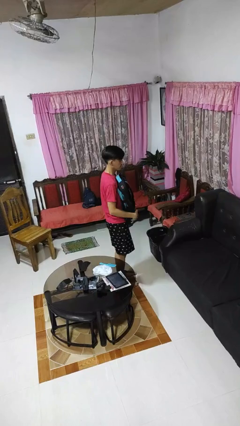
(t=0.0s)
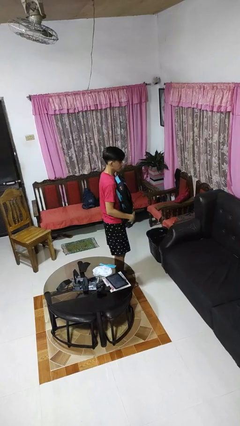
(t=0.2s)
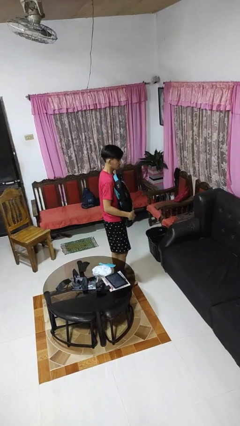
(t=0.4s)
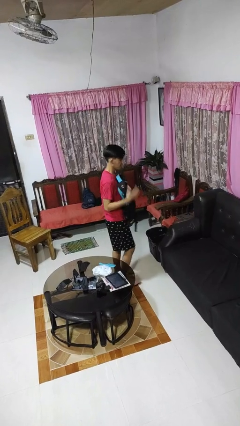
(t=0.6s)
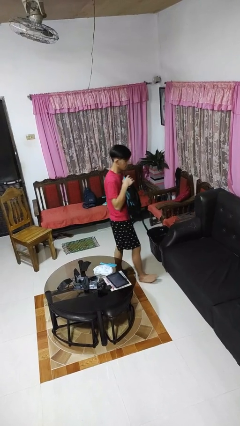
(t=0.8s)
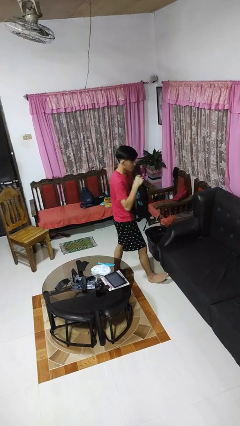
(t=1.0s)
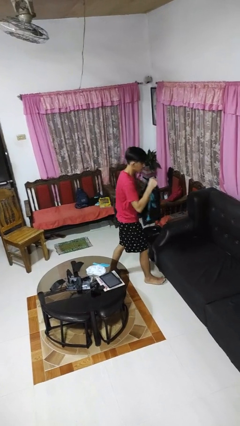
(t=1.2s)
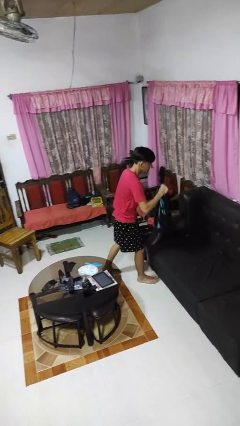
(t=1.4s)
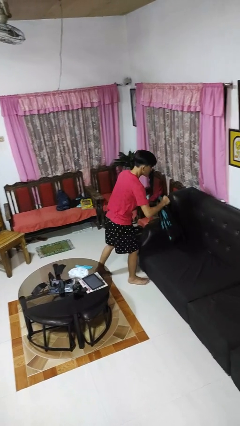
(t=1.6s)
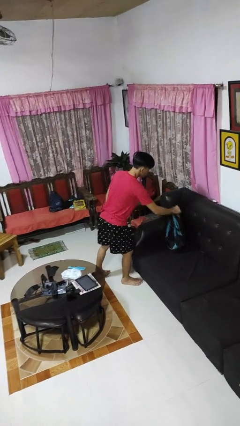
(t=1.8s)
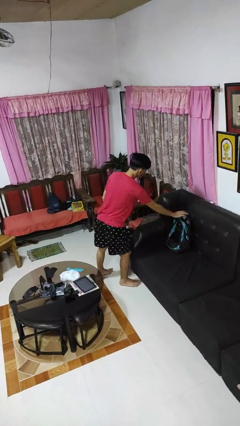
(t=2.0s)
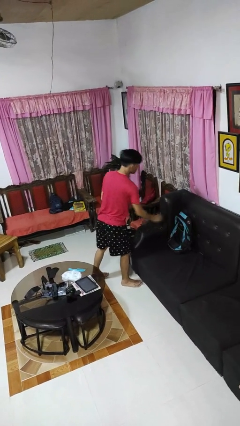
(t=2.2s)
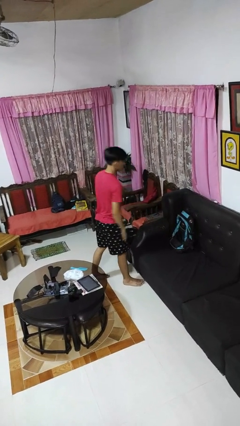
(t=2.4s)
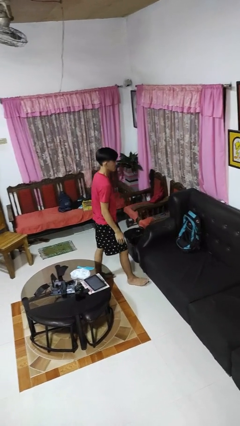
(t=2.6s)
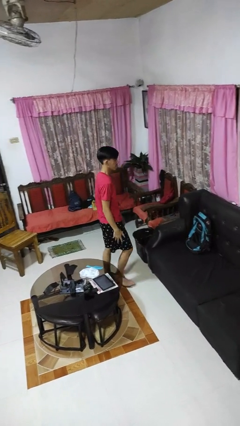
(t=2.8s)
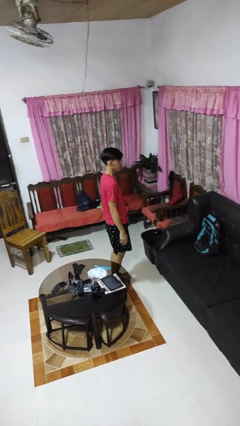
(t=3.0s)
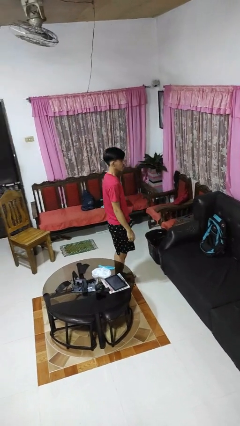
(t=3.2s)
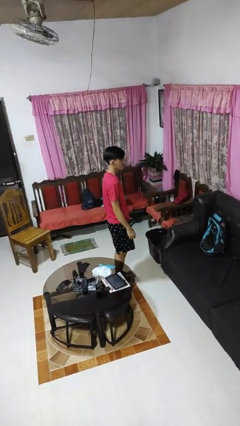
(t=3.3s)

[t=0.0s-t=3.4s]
person puts down object on couch

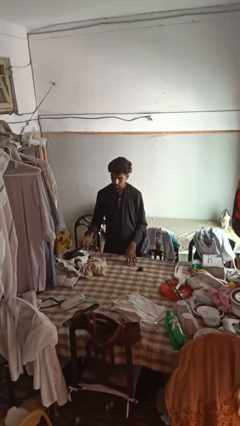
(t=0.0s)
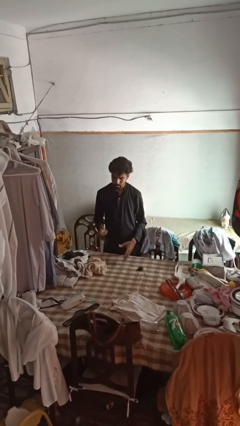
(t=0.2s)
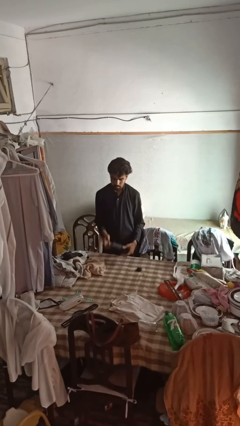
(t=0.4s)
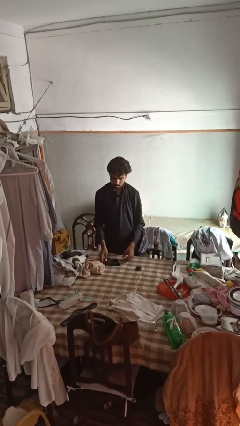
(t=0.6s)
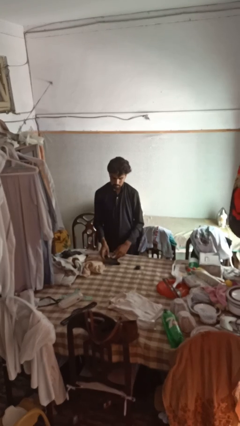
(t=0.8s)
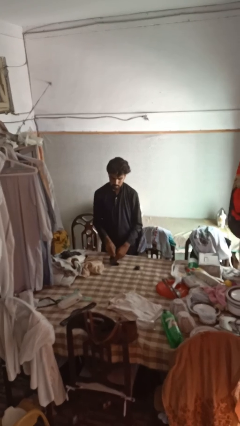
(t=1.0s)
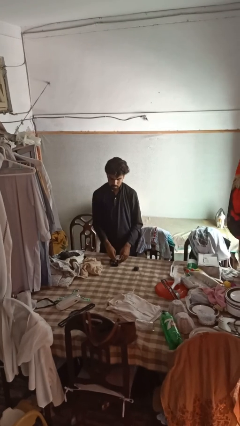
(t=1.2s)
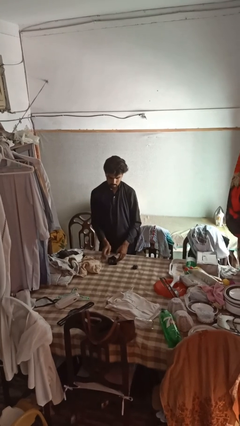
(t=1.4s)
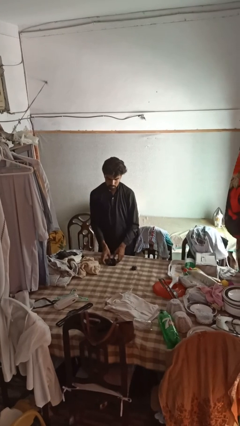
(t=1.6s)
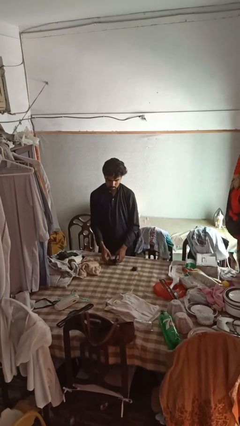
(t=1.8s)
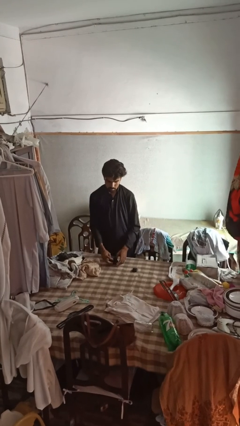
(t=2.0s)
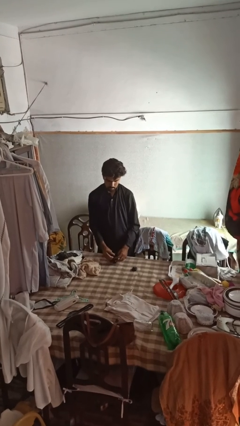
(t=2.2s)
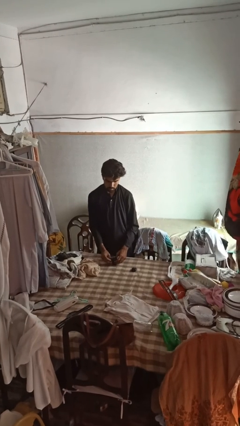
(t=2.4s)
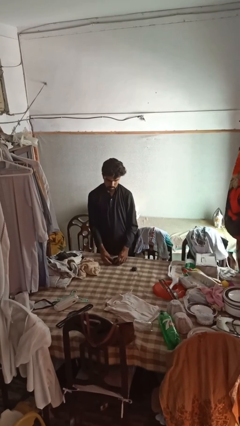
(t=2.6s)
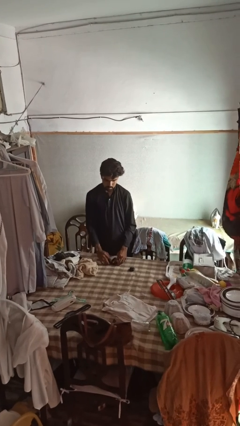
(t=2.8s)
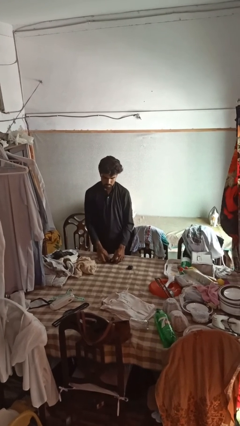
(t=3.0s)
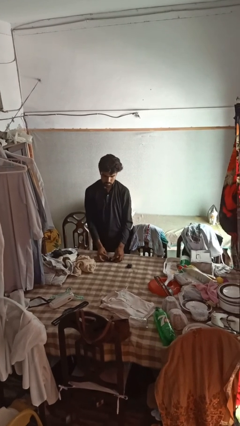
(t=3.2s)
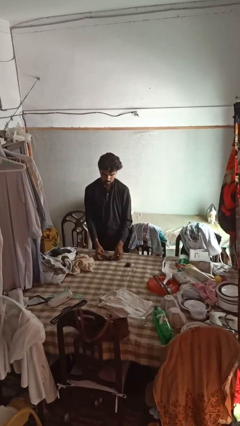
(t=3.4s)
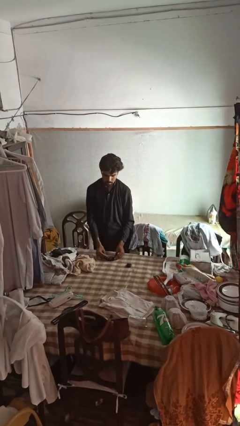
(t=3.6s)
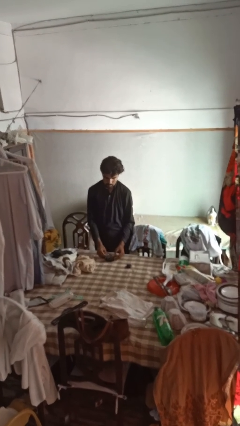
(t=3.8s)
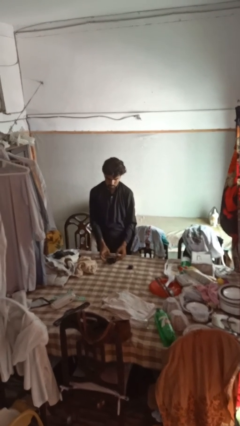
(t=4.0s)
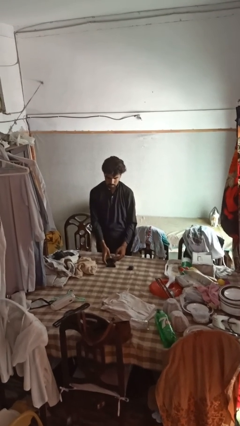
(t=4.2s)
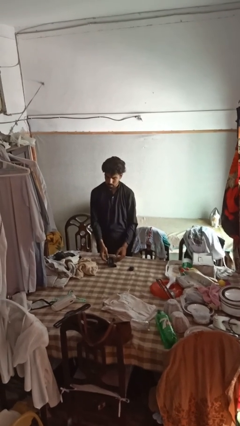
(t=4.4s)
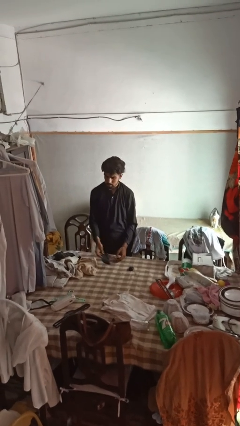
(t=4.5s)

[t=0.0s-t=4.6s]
person folds socks

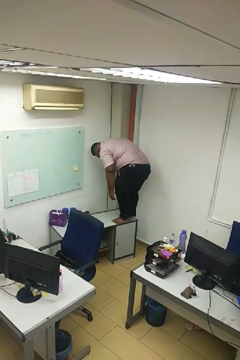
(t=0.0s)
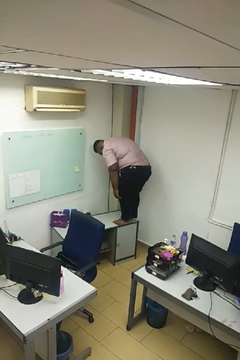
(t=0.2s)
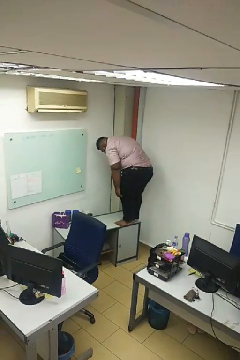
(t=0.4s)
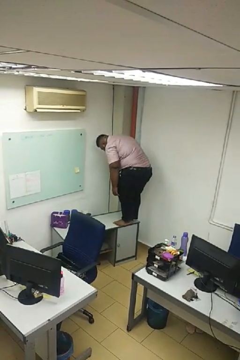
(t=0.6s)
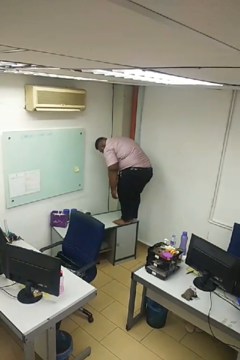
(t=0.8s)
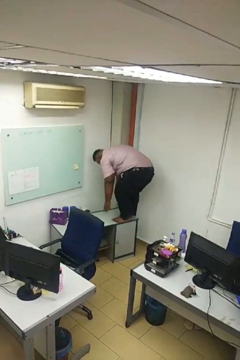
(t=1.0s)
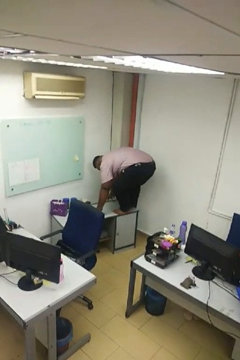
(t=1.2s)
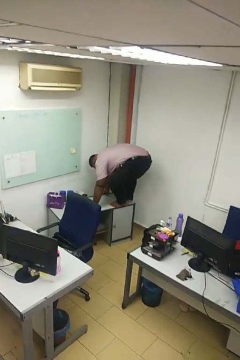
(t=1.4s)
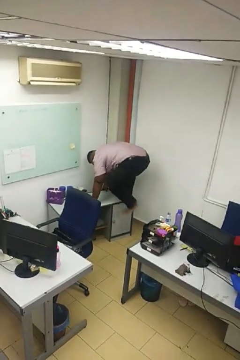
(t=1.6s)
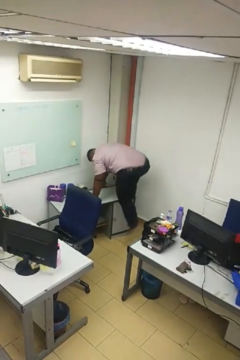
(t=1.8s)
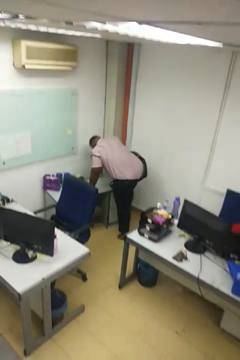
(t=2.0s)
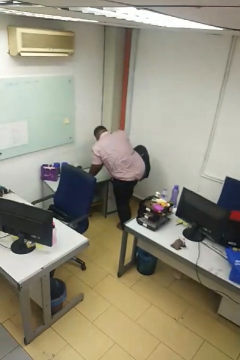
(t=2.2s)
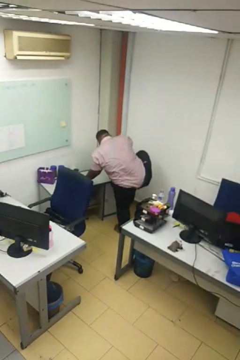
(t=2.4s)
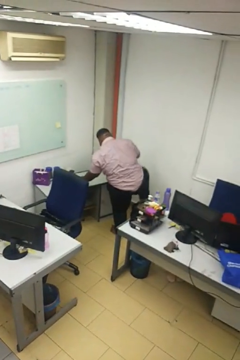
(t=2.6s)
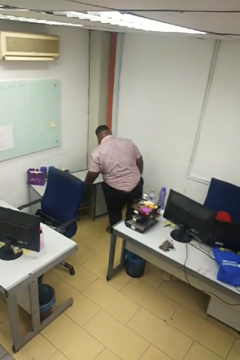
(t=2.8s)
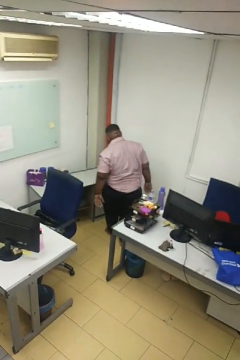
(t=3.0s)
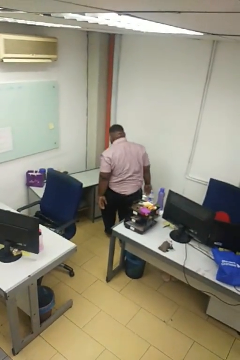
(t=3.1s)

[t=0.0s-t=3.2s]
person climbs off table

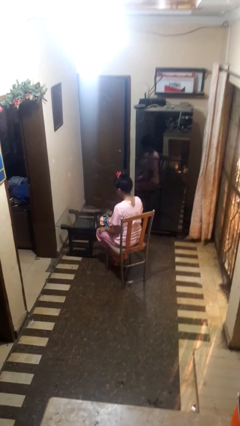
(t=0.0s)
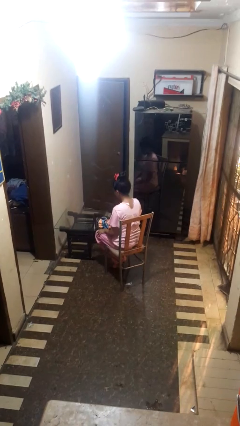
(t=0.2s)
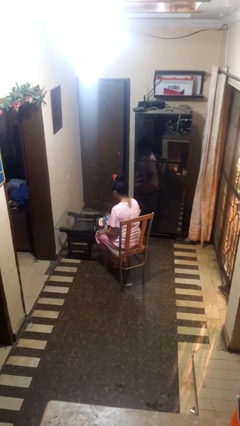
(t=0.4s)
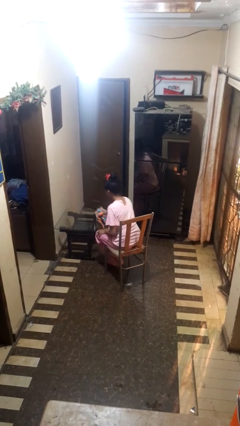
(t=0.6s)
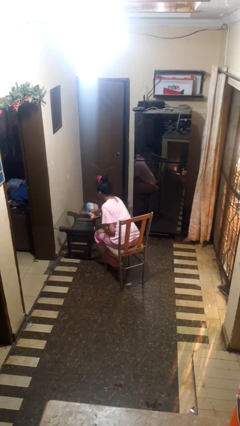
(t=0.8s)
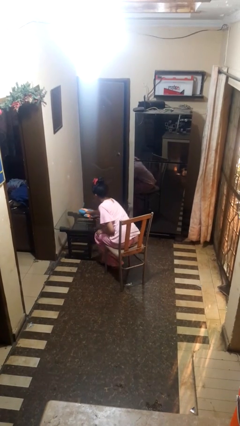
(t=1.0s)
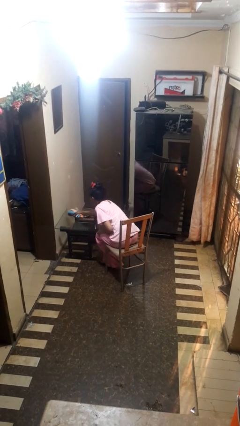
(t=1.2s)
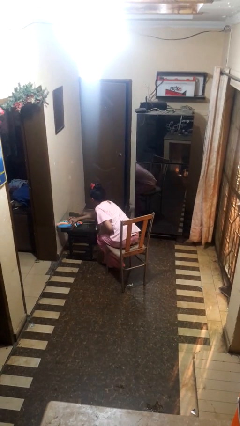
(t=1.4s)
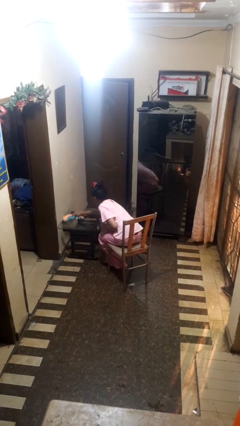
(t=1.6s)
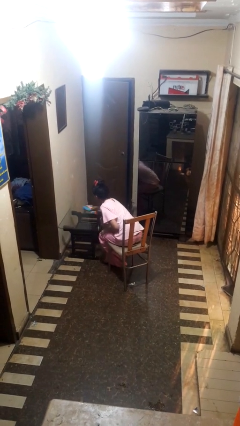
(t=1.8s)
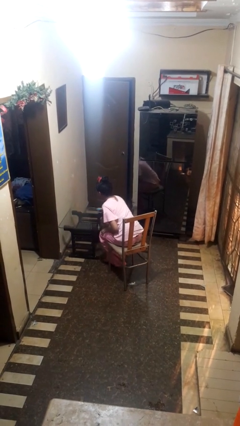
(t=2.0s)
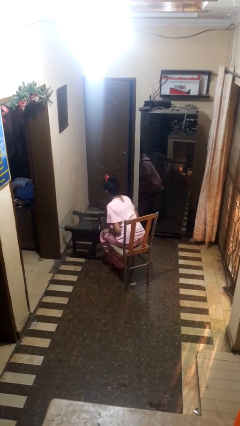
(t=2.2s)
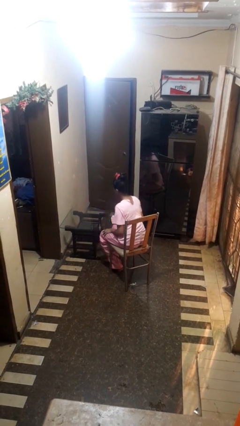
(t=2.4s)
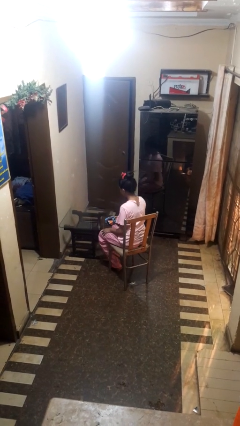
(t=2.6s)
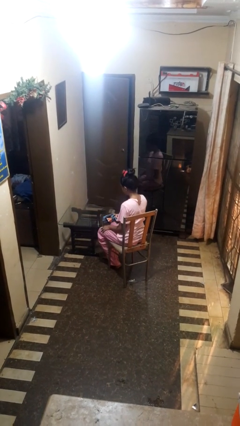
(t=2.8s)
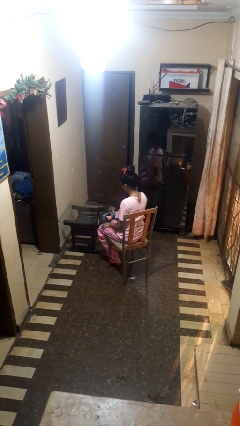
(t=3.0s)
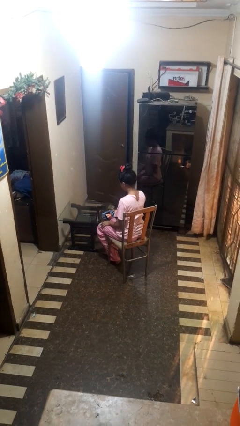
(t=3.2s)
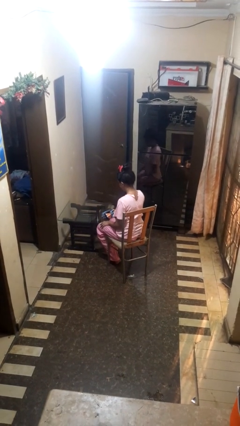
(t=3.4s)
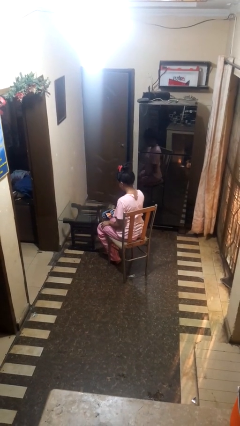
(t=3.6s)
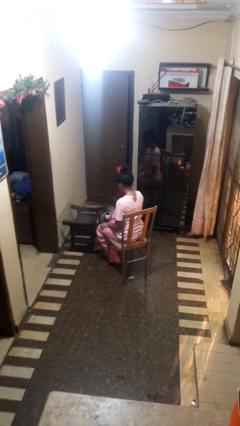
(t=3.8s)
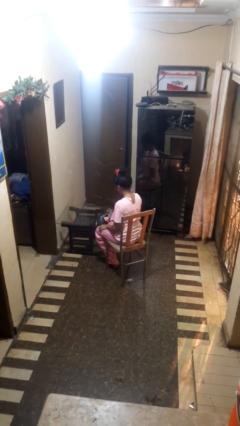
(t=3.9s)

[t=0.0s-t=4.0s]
person cleans table with rag

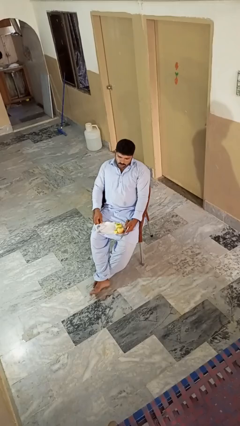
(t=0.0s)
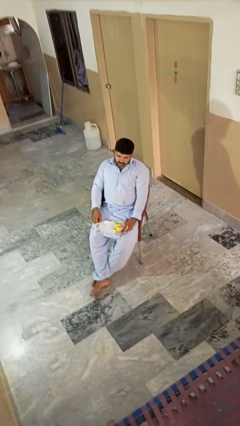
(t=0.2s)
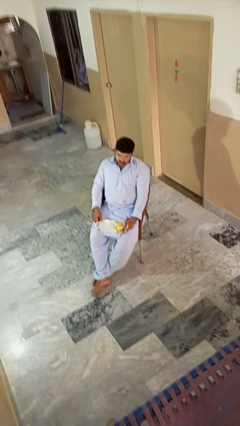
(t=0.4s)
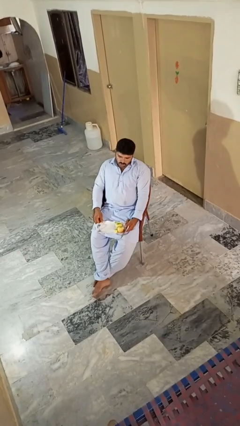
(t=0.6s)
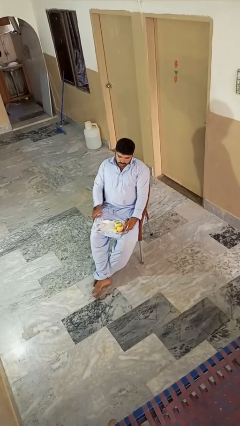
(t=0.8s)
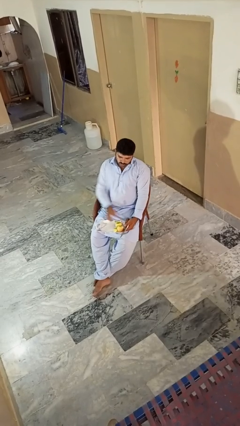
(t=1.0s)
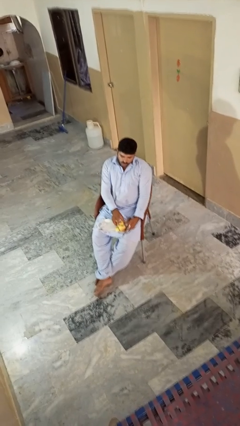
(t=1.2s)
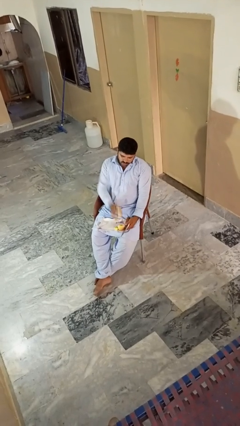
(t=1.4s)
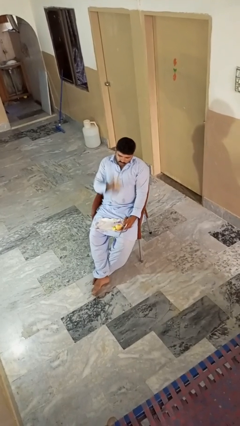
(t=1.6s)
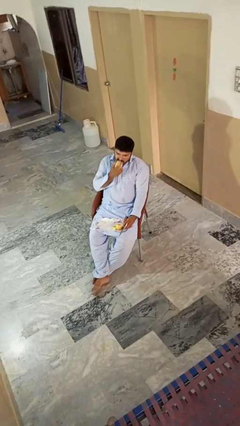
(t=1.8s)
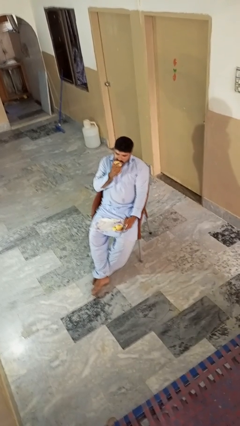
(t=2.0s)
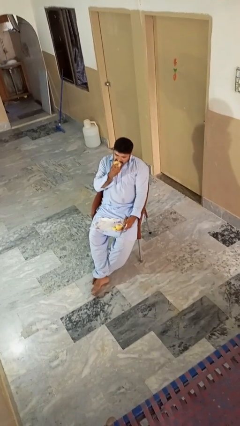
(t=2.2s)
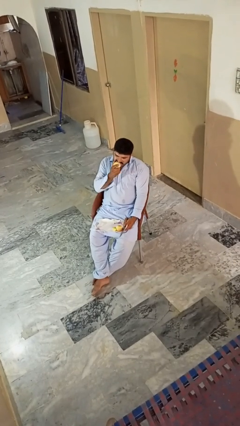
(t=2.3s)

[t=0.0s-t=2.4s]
person eats apple

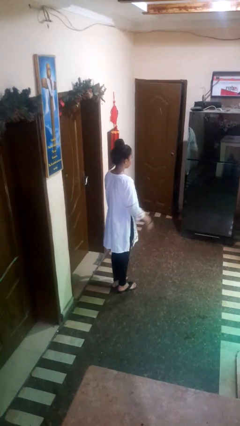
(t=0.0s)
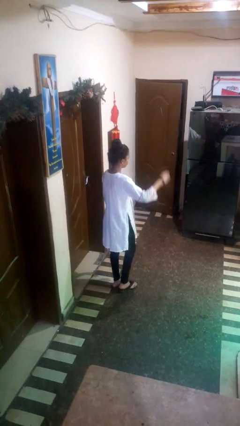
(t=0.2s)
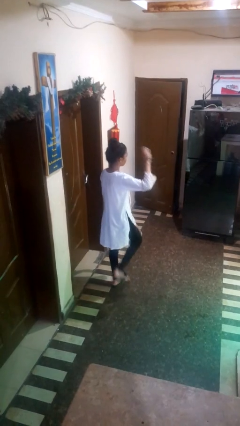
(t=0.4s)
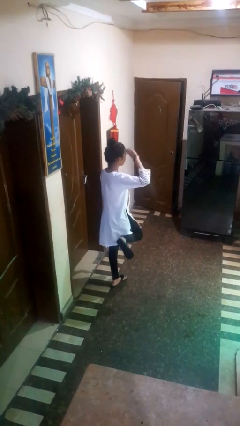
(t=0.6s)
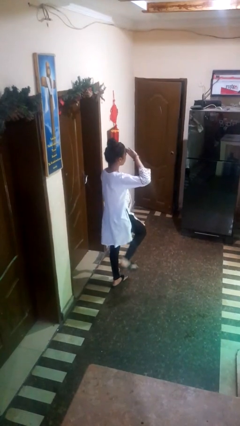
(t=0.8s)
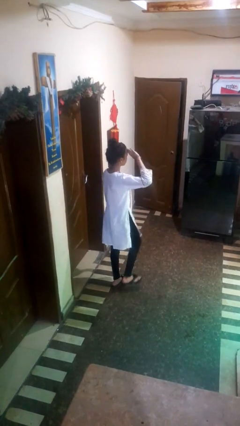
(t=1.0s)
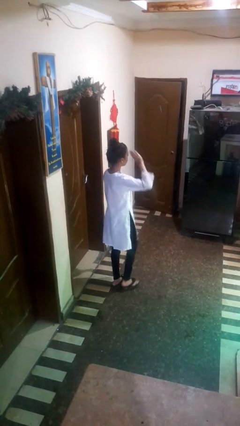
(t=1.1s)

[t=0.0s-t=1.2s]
person salutes
